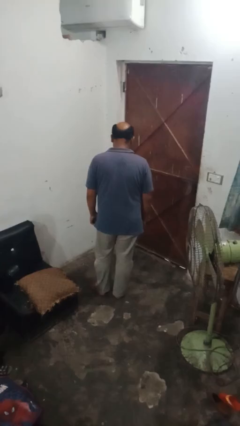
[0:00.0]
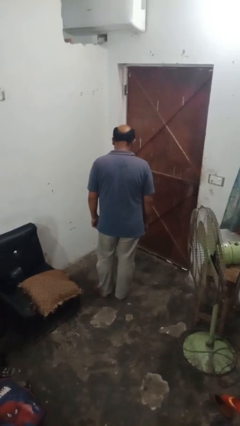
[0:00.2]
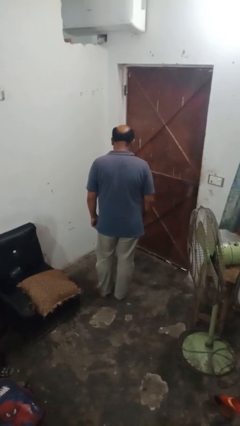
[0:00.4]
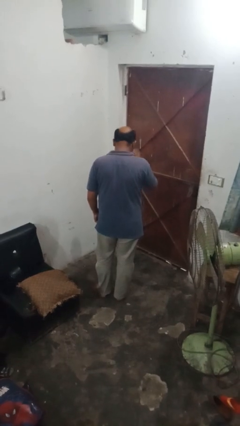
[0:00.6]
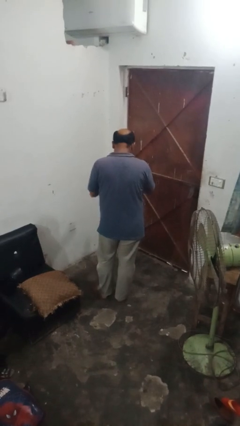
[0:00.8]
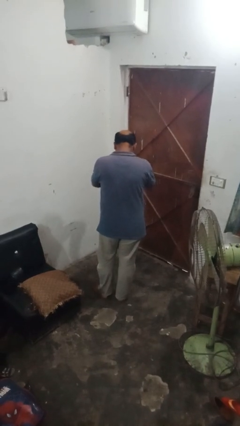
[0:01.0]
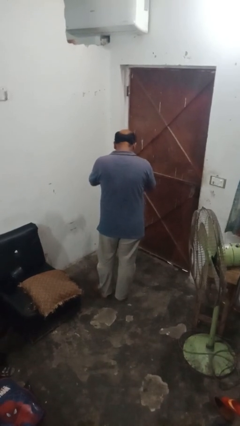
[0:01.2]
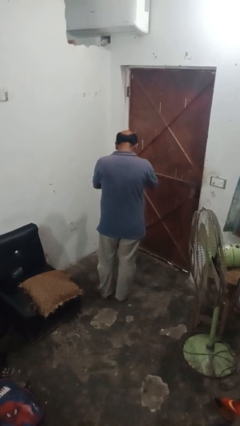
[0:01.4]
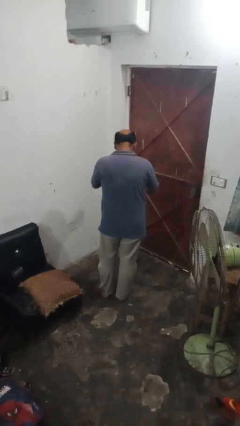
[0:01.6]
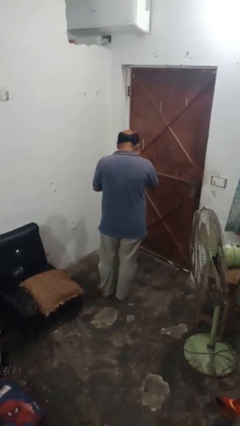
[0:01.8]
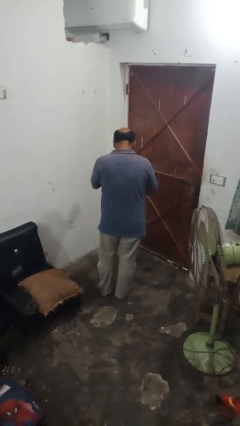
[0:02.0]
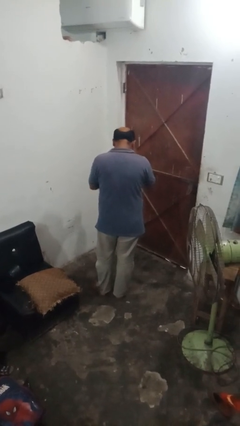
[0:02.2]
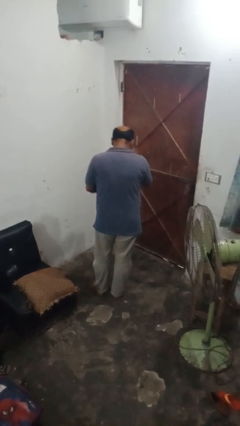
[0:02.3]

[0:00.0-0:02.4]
person drums on chest

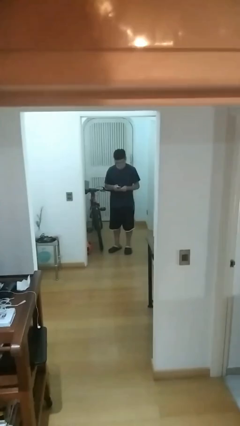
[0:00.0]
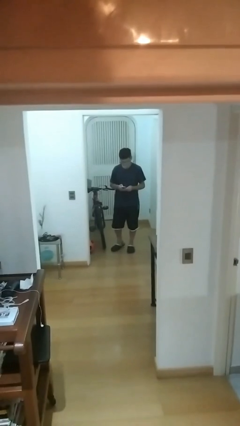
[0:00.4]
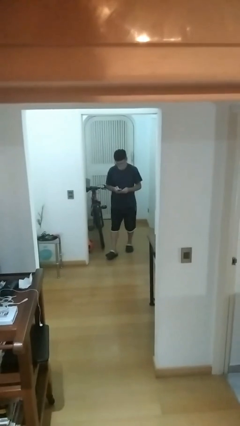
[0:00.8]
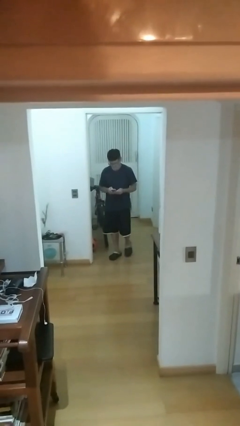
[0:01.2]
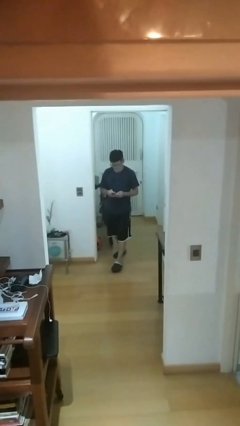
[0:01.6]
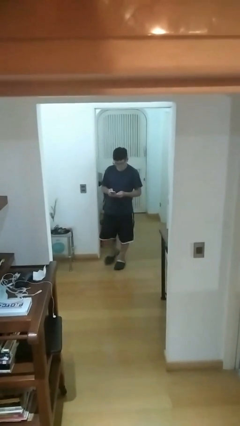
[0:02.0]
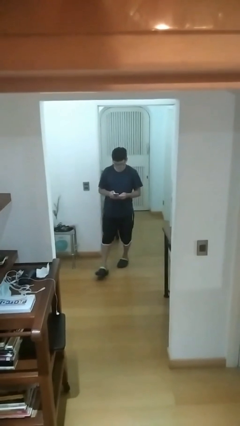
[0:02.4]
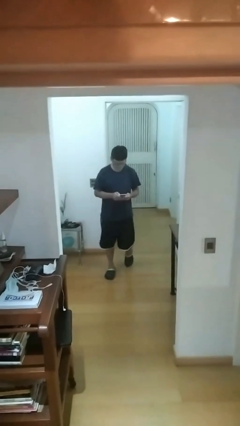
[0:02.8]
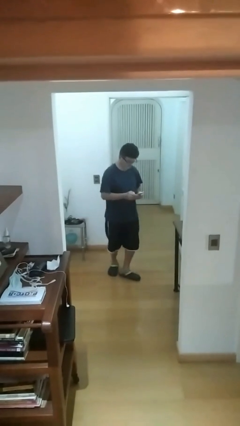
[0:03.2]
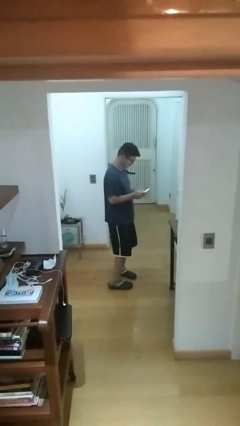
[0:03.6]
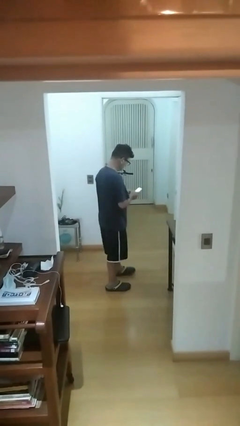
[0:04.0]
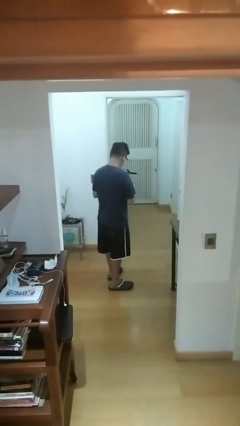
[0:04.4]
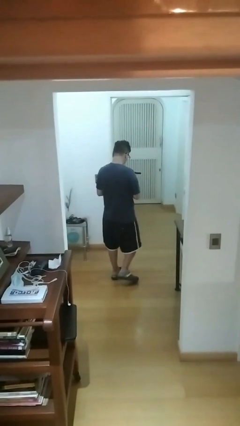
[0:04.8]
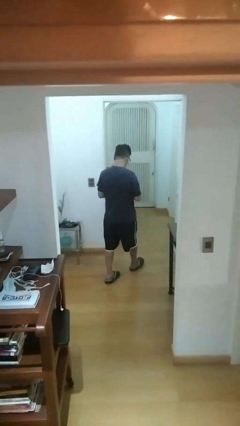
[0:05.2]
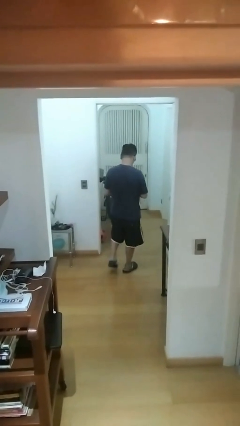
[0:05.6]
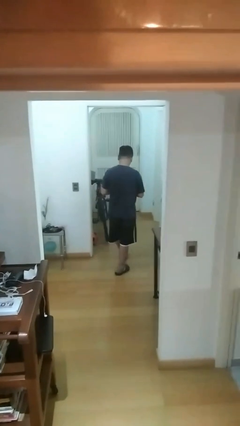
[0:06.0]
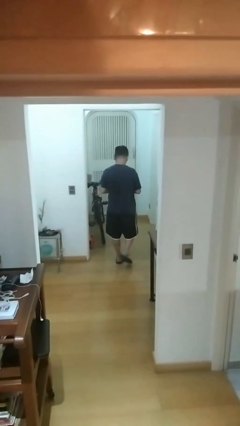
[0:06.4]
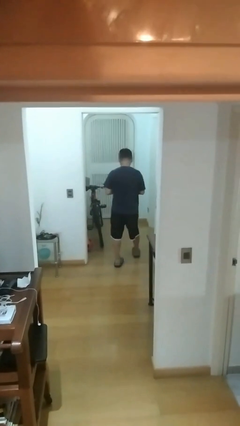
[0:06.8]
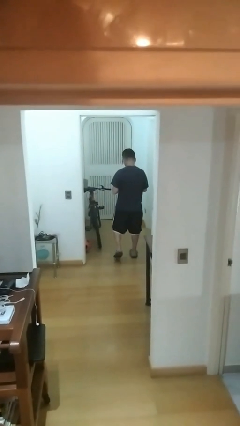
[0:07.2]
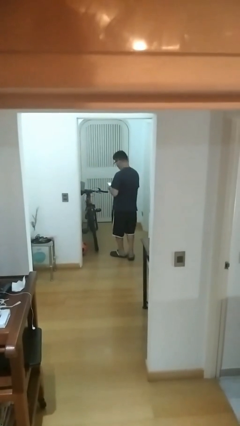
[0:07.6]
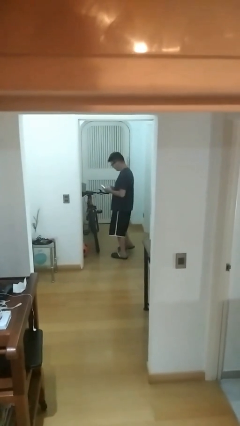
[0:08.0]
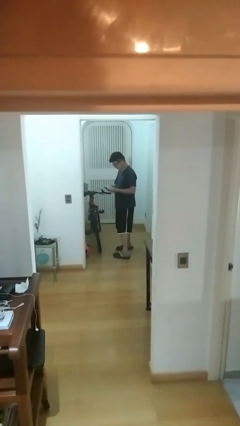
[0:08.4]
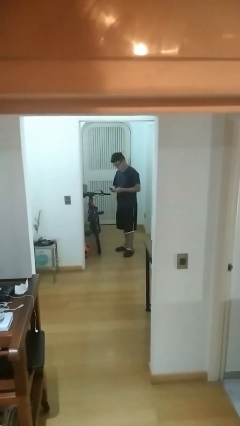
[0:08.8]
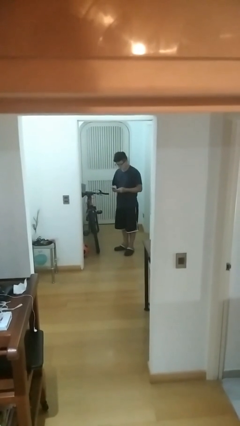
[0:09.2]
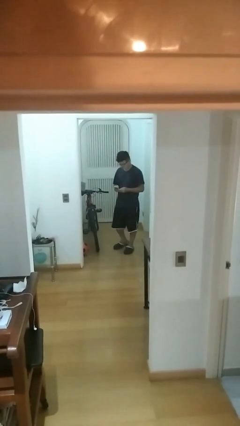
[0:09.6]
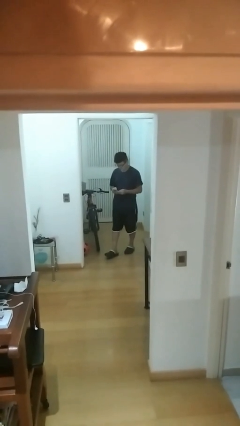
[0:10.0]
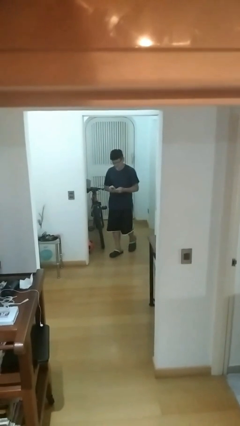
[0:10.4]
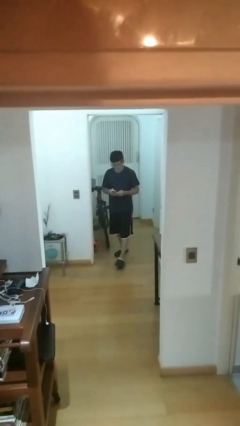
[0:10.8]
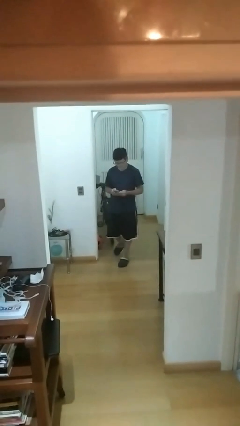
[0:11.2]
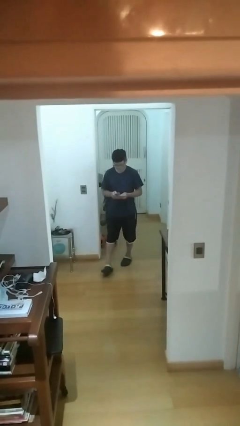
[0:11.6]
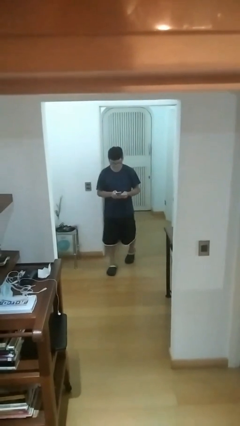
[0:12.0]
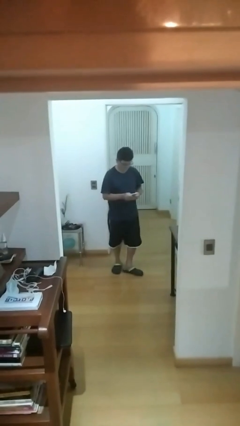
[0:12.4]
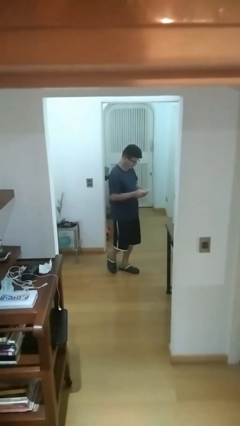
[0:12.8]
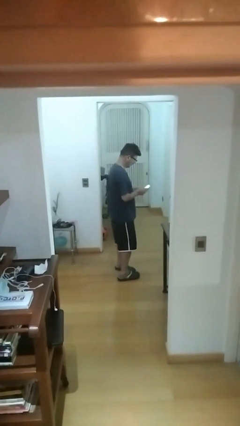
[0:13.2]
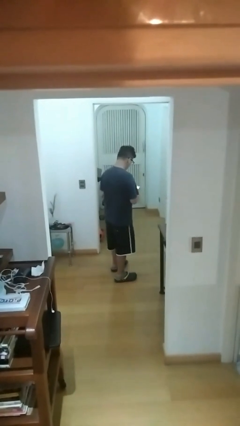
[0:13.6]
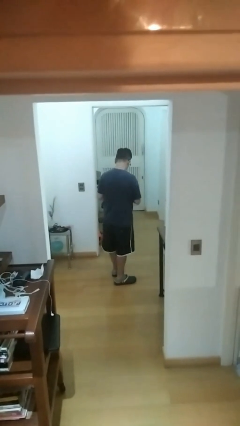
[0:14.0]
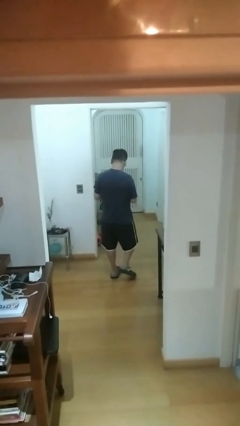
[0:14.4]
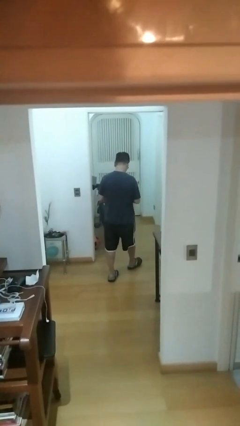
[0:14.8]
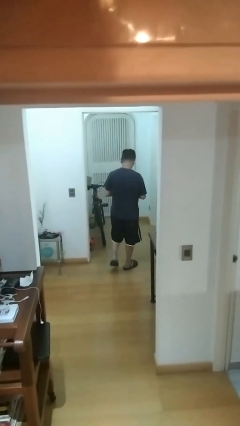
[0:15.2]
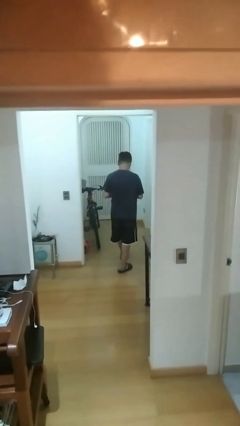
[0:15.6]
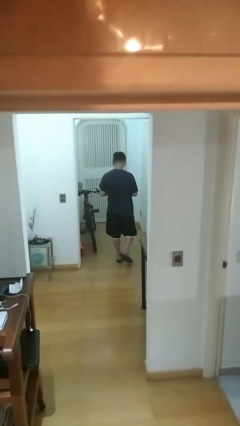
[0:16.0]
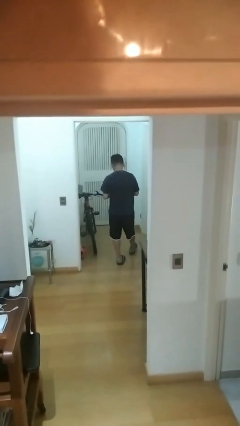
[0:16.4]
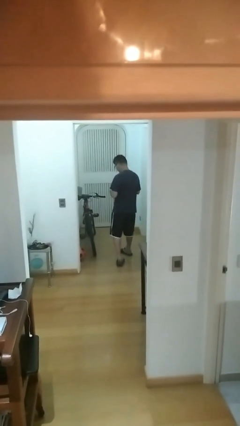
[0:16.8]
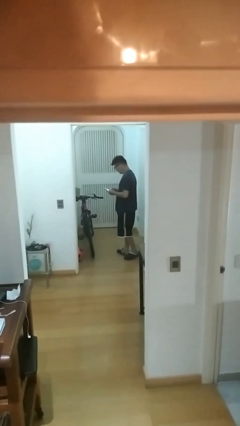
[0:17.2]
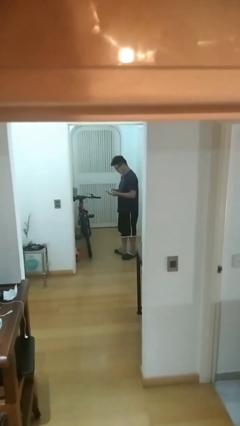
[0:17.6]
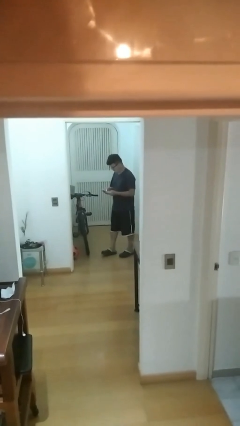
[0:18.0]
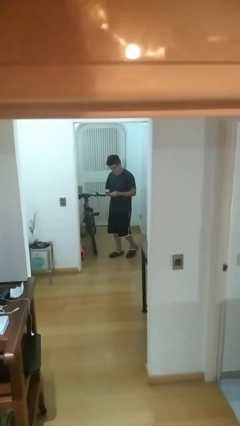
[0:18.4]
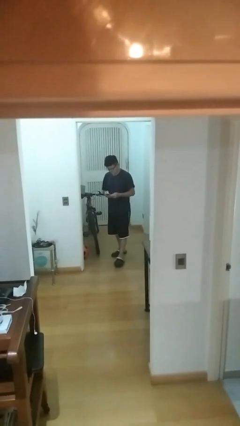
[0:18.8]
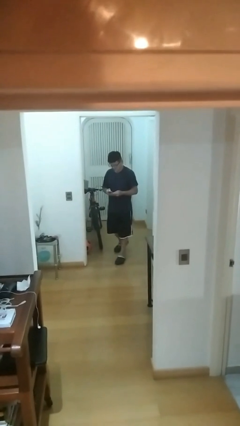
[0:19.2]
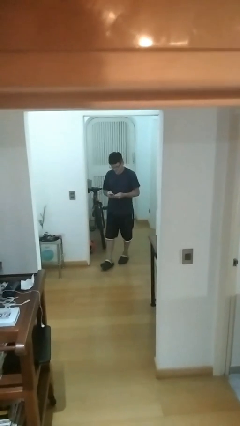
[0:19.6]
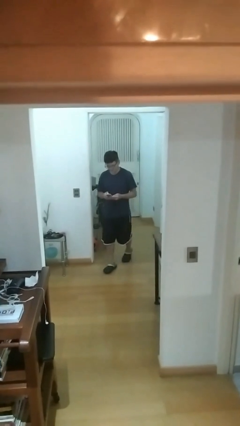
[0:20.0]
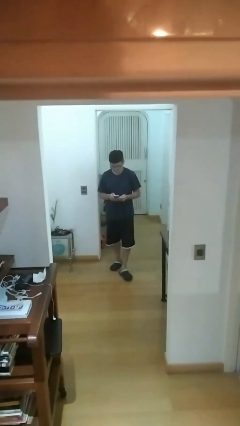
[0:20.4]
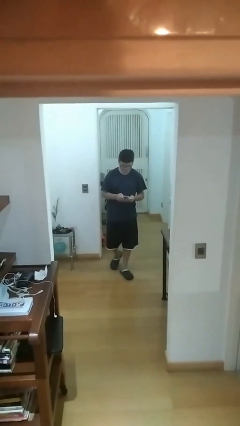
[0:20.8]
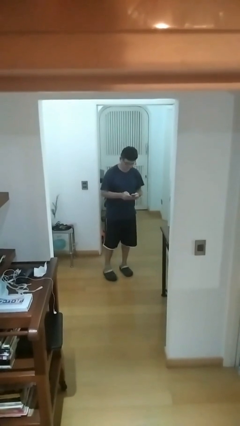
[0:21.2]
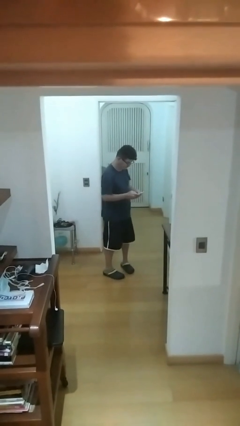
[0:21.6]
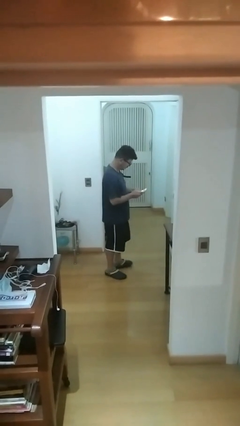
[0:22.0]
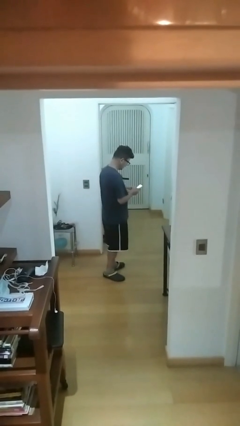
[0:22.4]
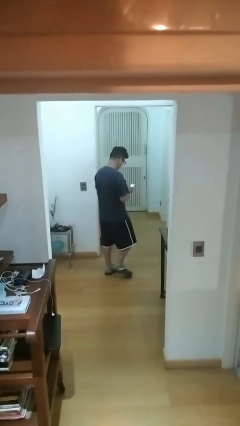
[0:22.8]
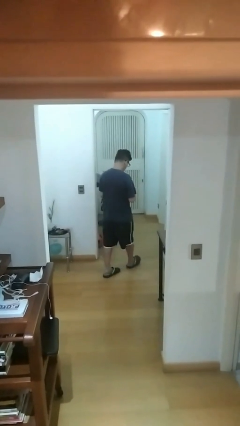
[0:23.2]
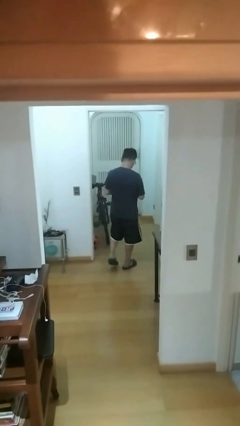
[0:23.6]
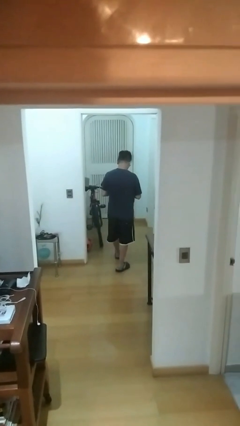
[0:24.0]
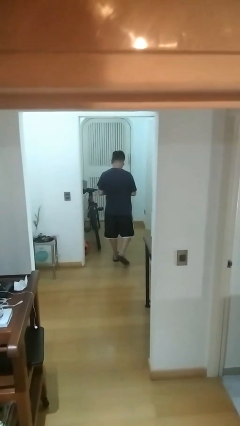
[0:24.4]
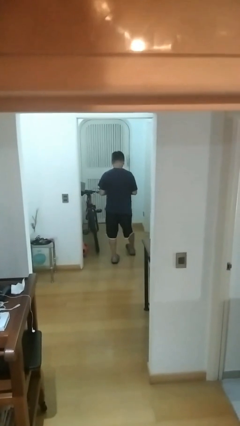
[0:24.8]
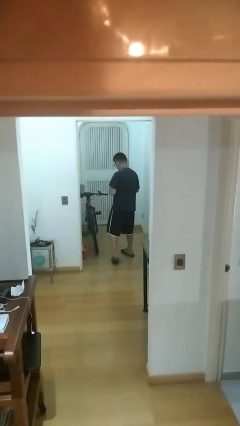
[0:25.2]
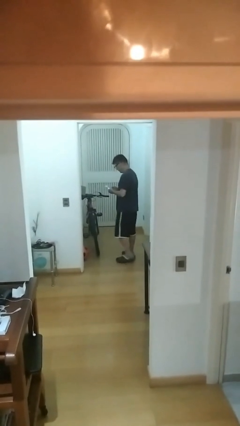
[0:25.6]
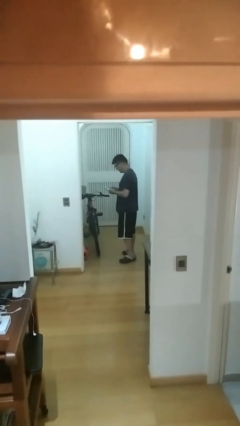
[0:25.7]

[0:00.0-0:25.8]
person texts on phone

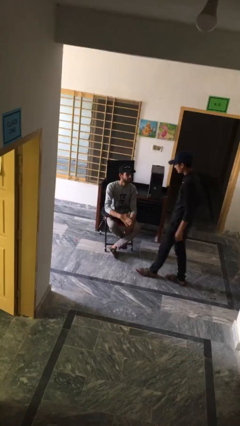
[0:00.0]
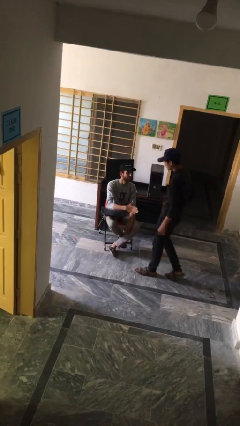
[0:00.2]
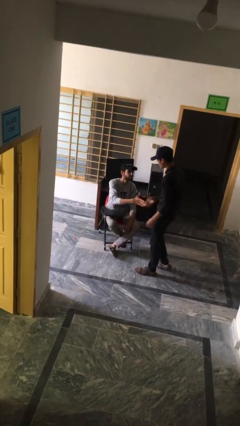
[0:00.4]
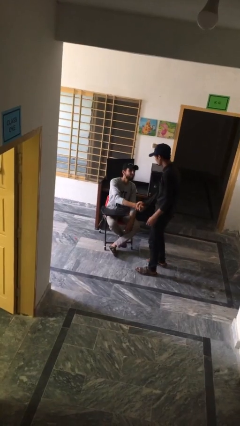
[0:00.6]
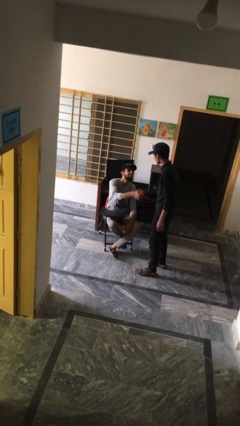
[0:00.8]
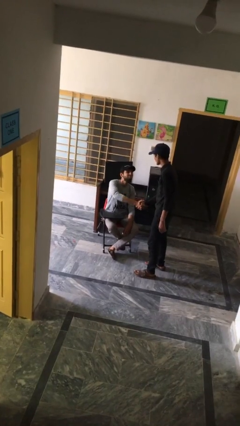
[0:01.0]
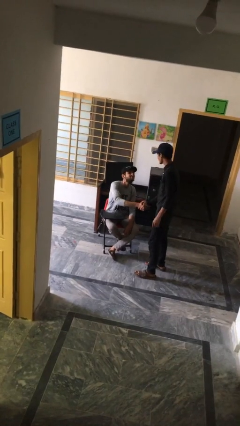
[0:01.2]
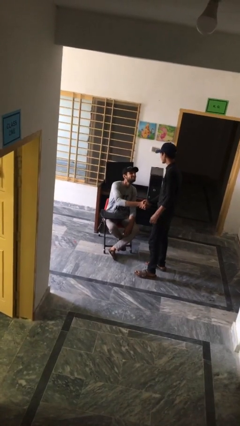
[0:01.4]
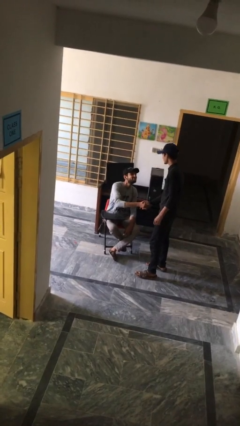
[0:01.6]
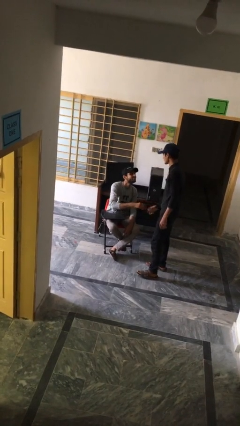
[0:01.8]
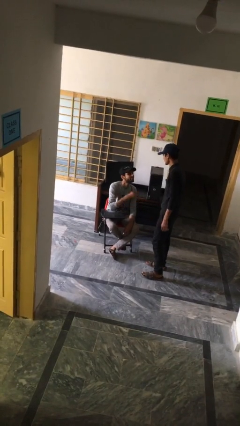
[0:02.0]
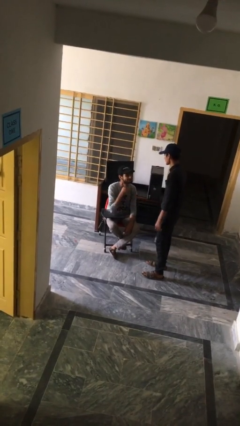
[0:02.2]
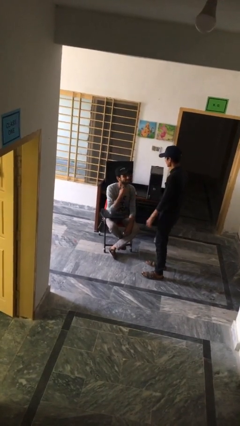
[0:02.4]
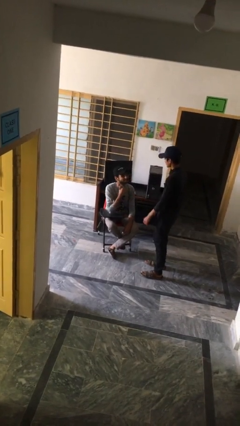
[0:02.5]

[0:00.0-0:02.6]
person shakes hand
